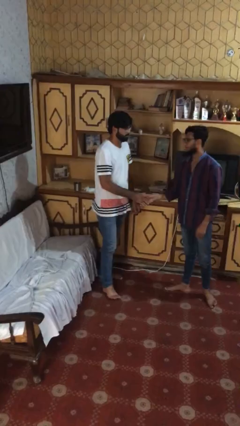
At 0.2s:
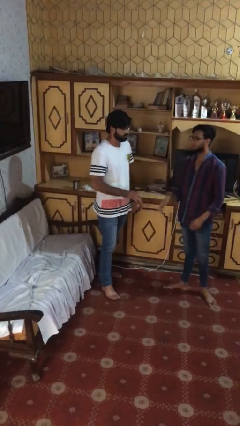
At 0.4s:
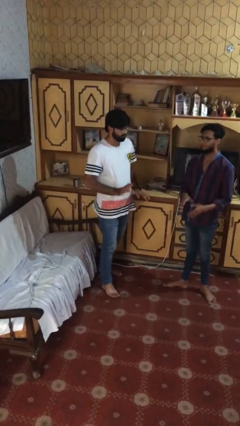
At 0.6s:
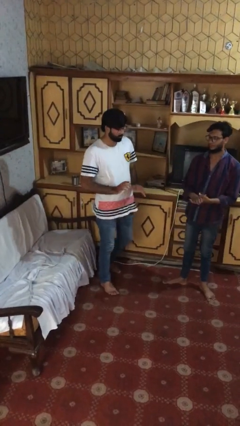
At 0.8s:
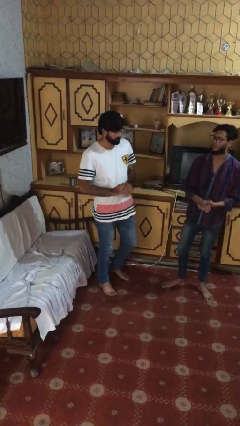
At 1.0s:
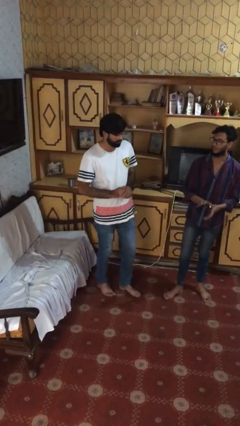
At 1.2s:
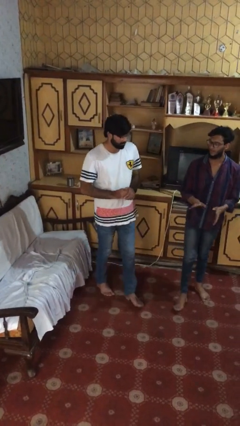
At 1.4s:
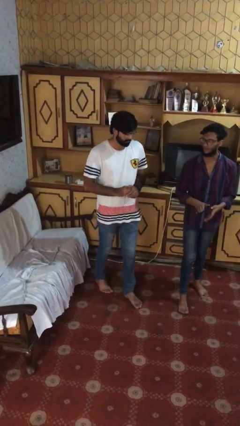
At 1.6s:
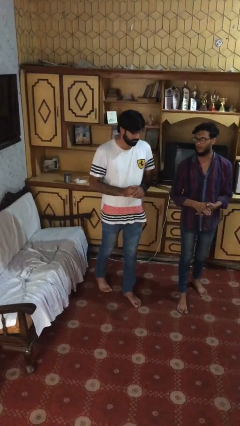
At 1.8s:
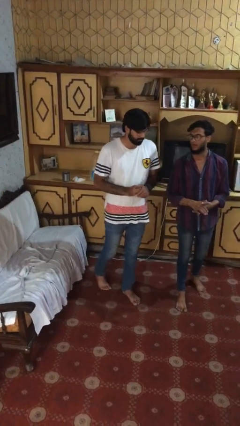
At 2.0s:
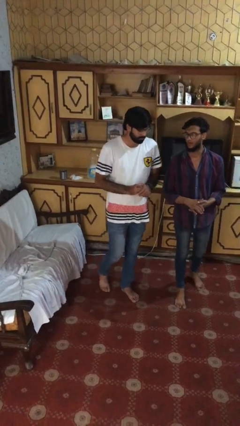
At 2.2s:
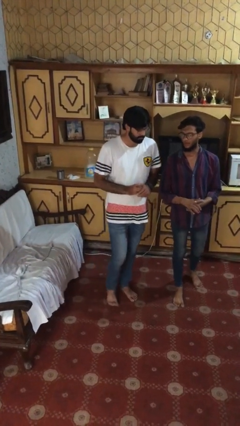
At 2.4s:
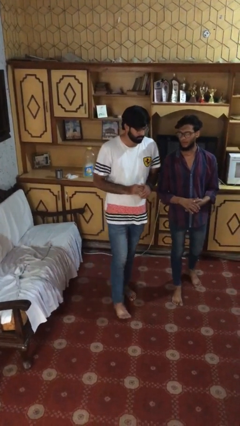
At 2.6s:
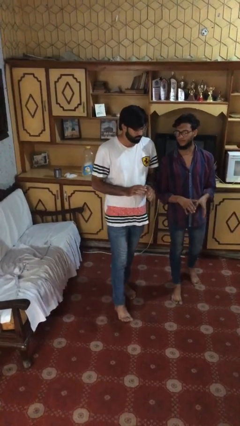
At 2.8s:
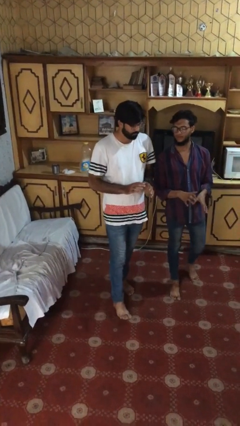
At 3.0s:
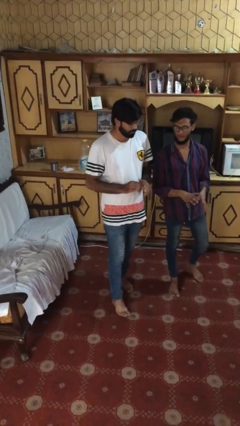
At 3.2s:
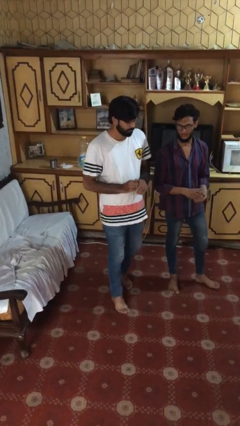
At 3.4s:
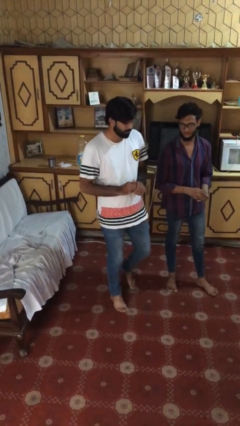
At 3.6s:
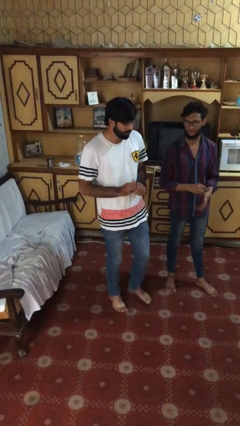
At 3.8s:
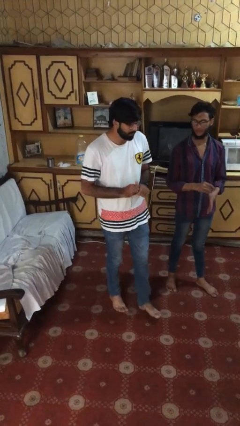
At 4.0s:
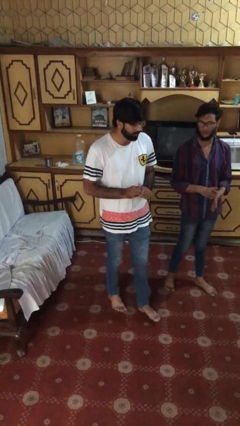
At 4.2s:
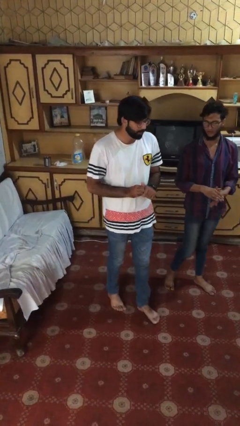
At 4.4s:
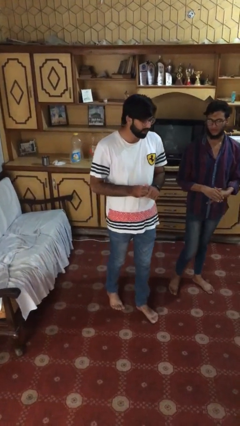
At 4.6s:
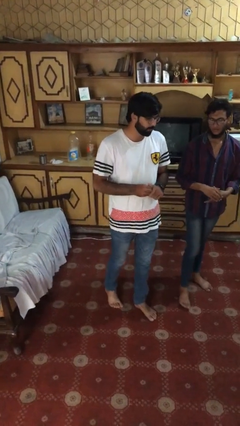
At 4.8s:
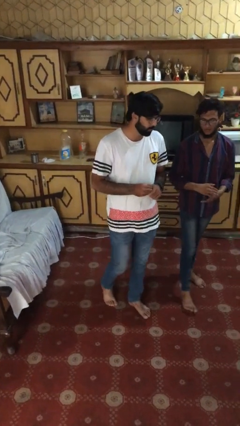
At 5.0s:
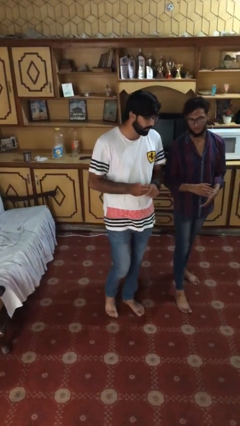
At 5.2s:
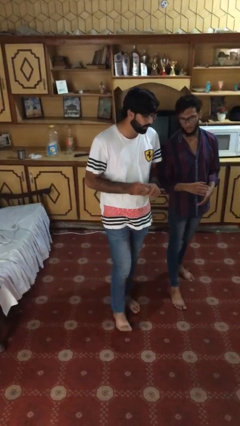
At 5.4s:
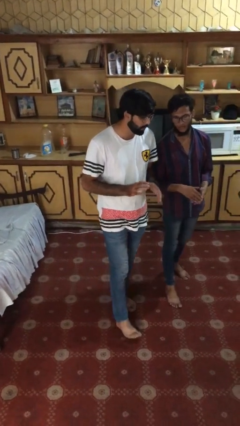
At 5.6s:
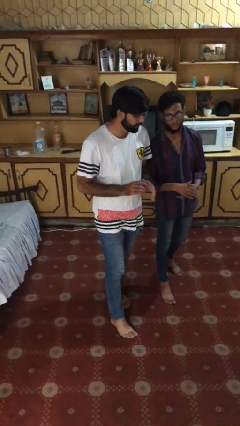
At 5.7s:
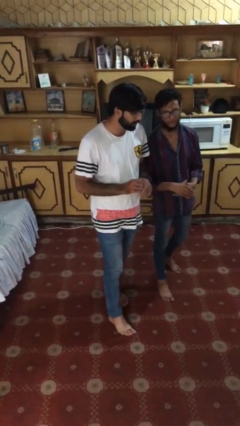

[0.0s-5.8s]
person talks to person

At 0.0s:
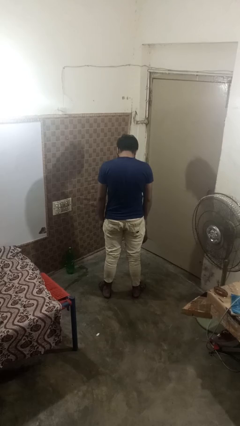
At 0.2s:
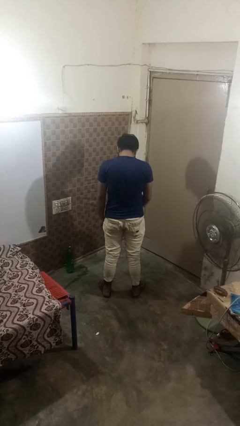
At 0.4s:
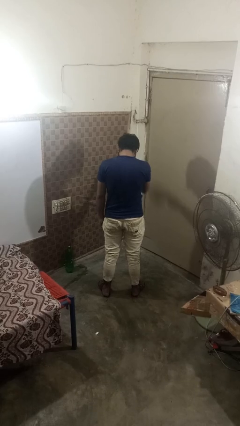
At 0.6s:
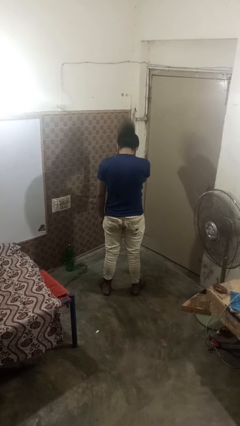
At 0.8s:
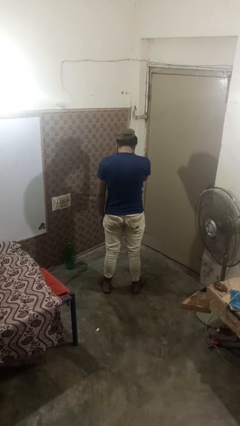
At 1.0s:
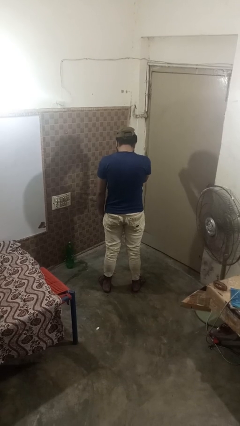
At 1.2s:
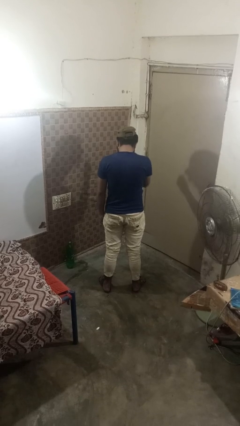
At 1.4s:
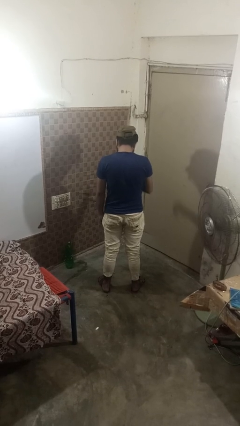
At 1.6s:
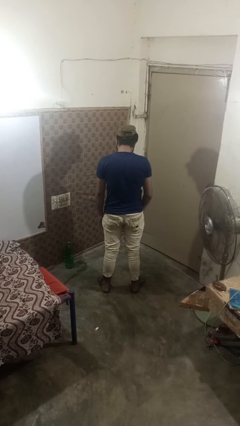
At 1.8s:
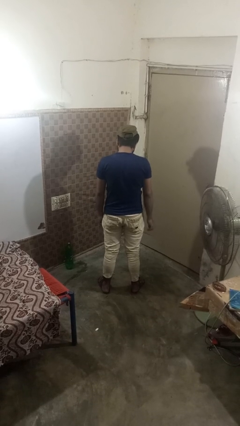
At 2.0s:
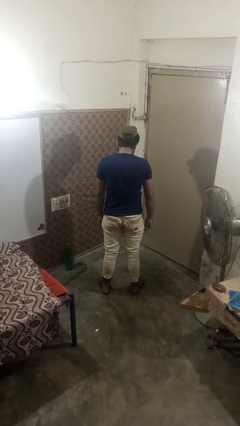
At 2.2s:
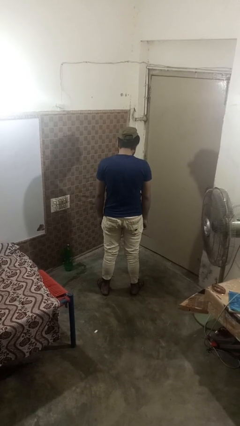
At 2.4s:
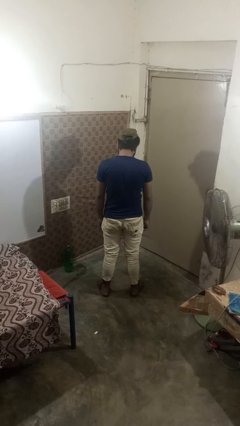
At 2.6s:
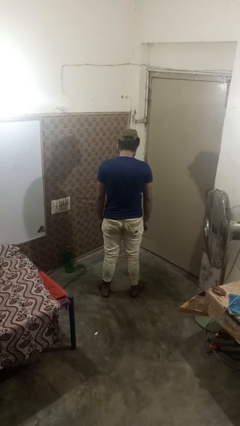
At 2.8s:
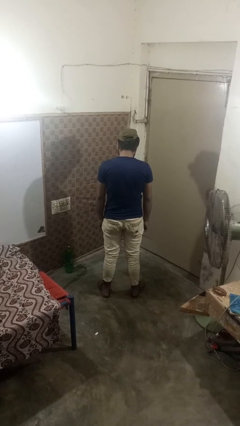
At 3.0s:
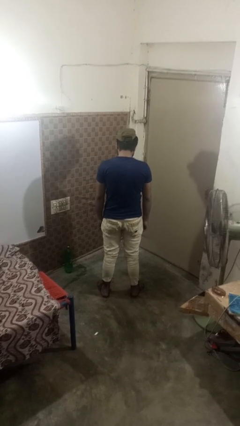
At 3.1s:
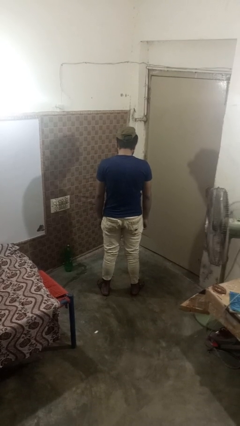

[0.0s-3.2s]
person puts on hat

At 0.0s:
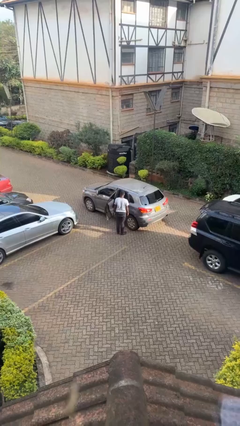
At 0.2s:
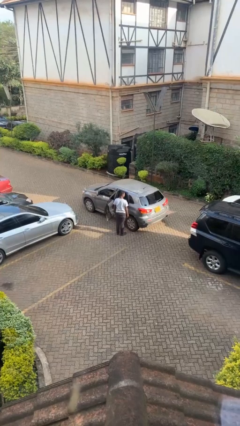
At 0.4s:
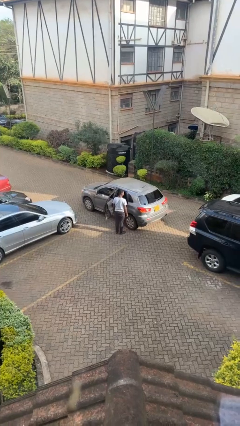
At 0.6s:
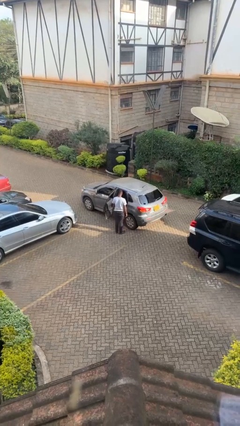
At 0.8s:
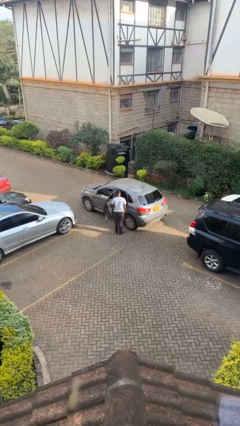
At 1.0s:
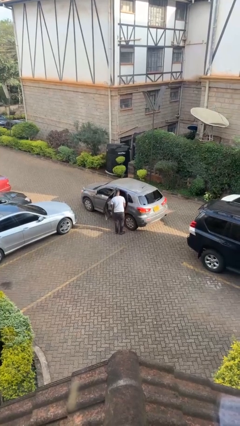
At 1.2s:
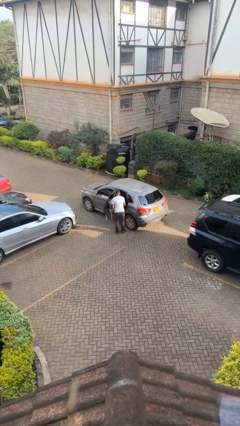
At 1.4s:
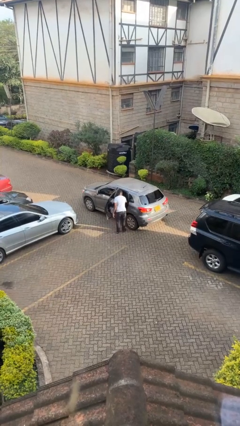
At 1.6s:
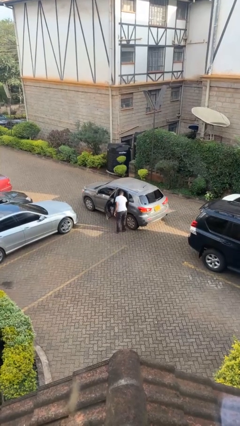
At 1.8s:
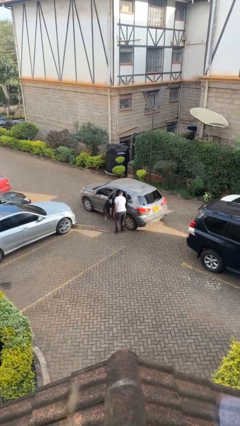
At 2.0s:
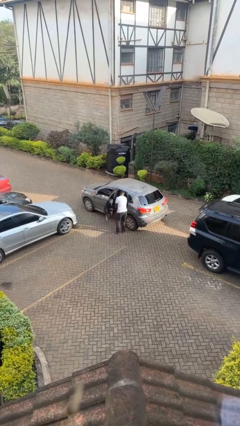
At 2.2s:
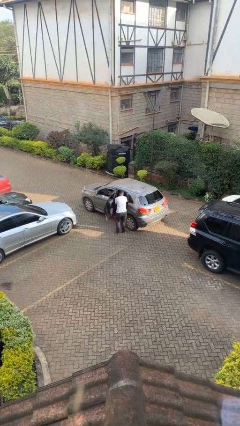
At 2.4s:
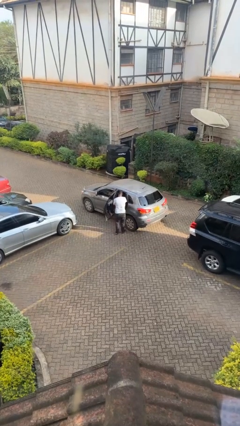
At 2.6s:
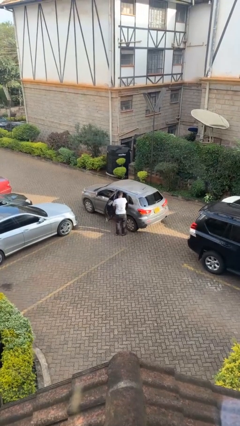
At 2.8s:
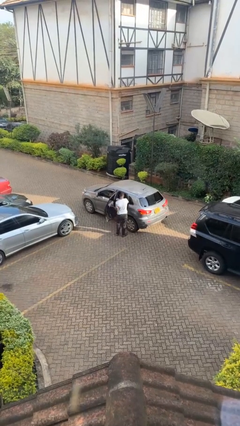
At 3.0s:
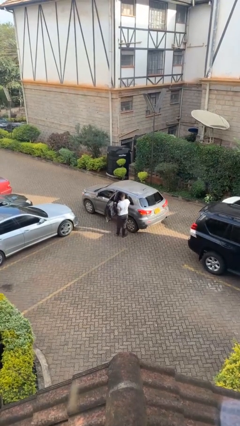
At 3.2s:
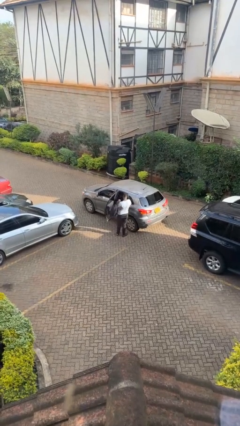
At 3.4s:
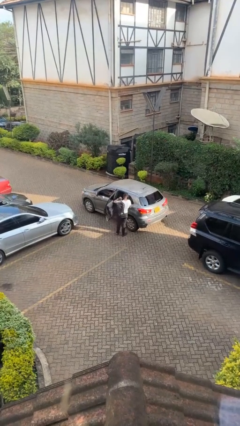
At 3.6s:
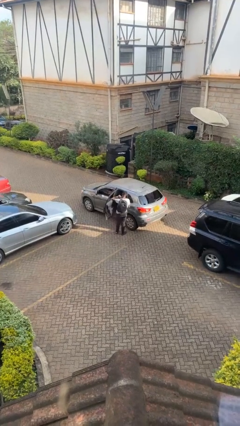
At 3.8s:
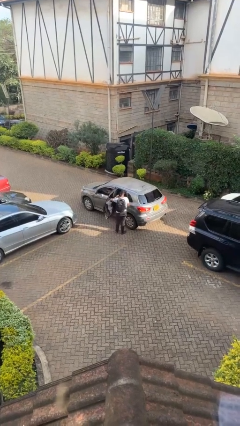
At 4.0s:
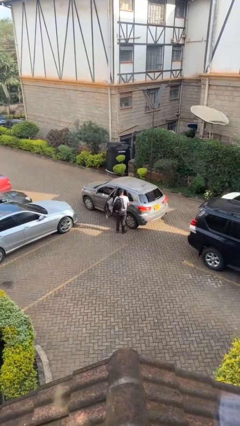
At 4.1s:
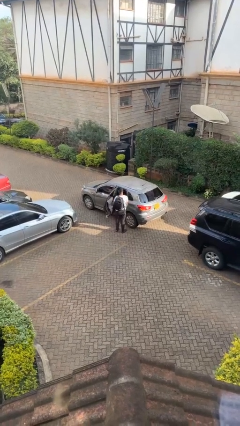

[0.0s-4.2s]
person unloads car

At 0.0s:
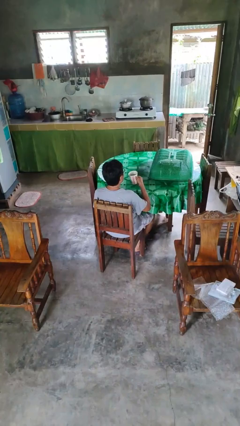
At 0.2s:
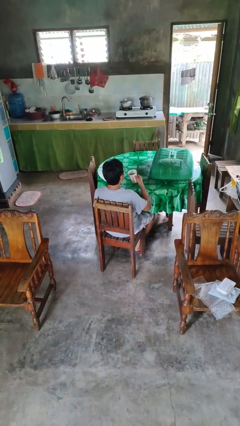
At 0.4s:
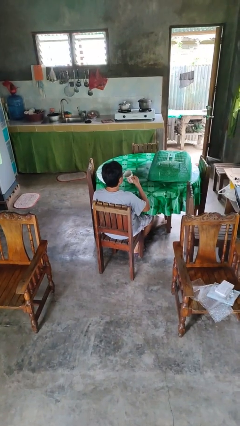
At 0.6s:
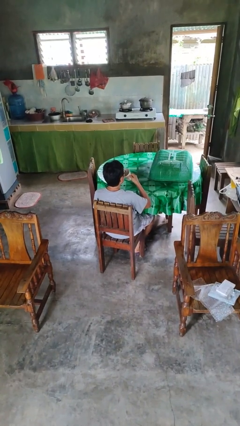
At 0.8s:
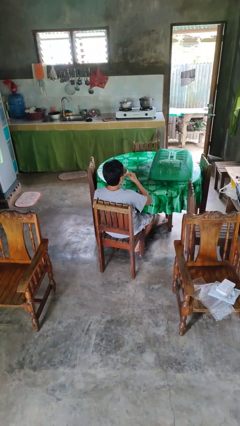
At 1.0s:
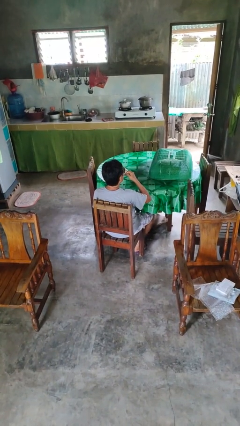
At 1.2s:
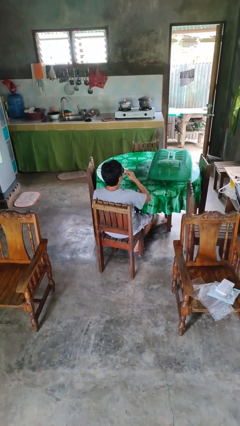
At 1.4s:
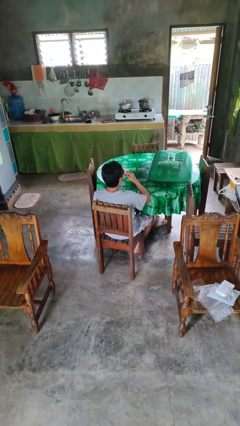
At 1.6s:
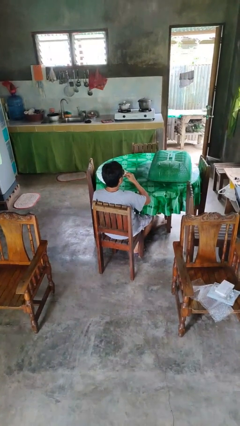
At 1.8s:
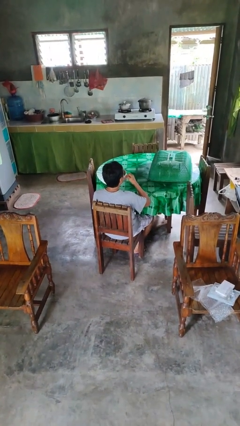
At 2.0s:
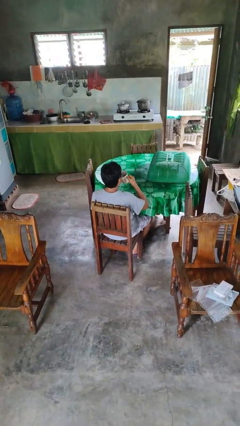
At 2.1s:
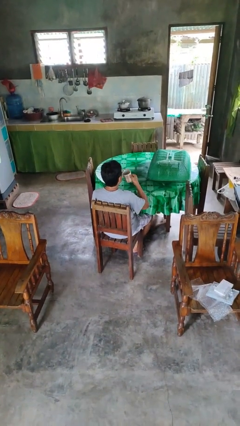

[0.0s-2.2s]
person drinks from mug

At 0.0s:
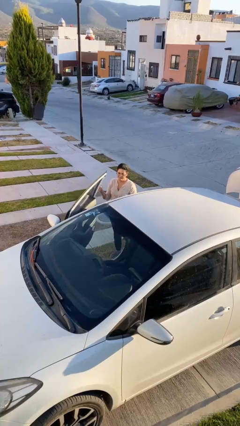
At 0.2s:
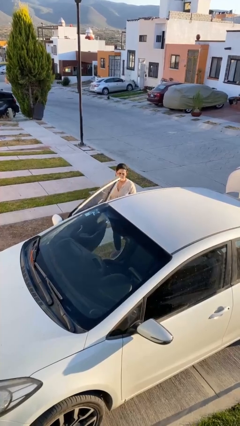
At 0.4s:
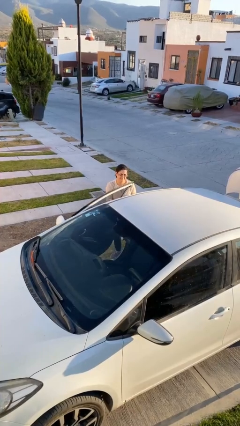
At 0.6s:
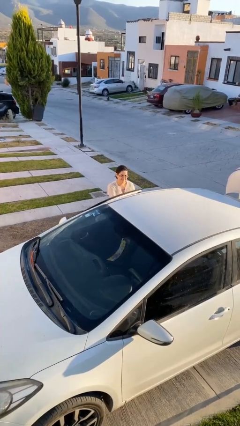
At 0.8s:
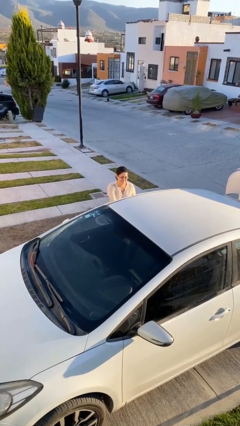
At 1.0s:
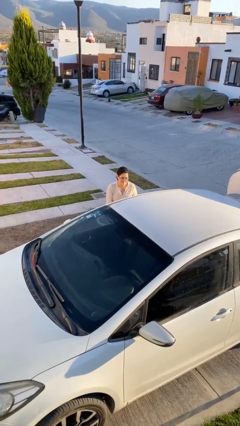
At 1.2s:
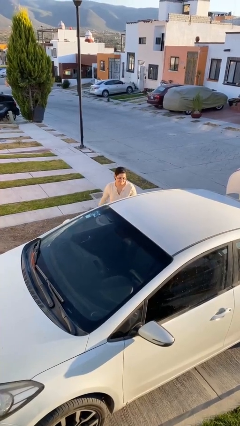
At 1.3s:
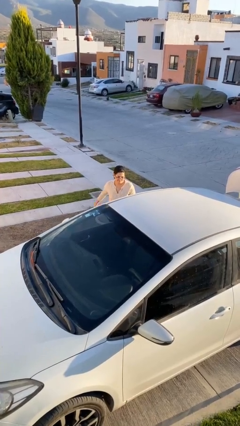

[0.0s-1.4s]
person closes car door

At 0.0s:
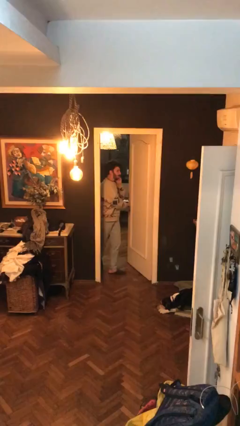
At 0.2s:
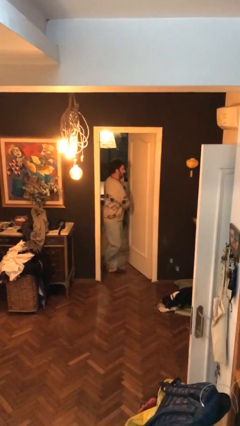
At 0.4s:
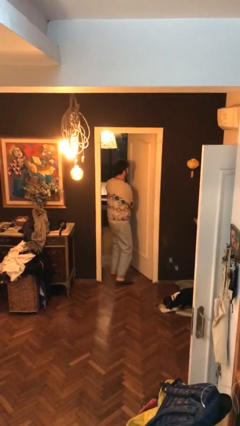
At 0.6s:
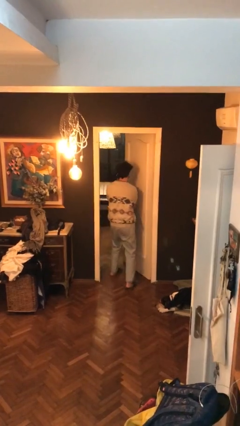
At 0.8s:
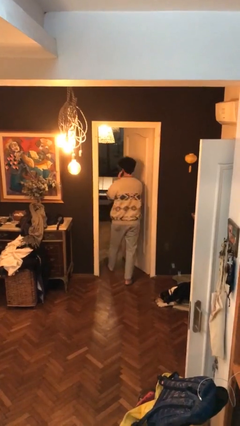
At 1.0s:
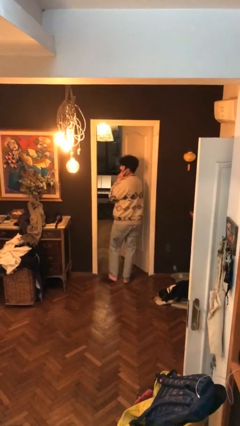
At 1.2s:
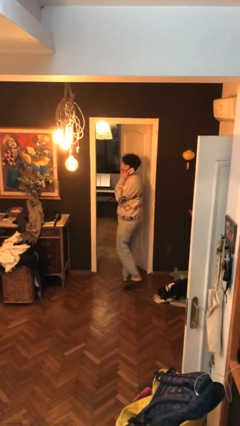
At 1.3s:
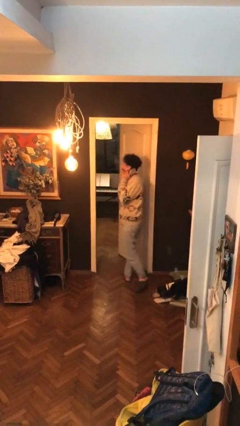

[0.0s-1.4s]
person enters scene through structure
